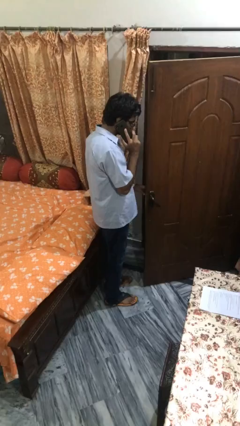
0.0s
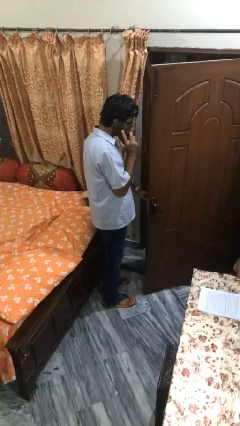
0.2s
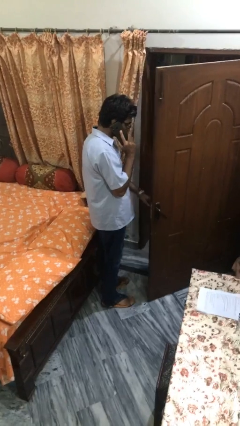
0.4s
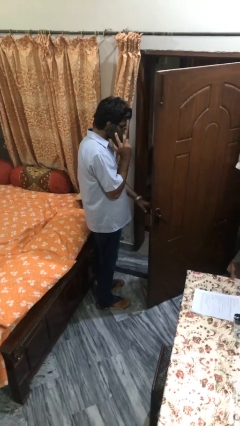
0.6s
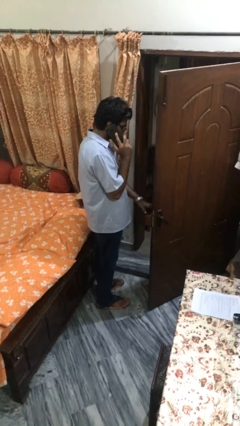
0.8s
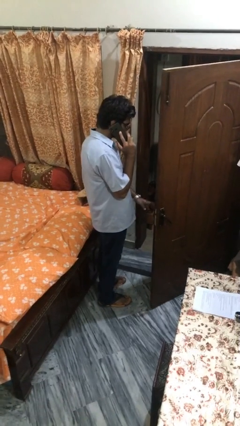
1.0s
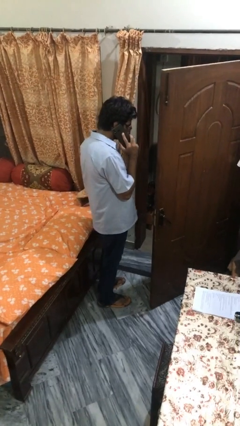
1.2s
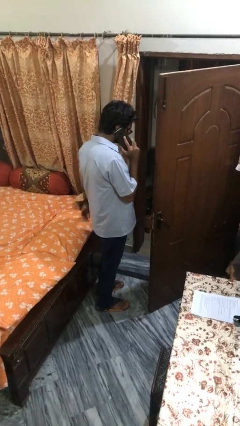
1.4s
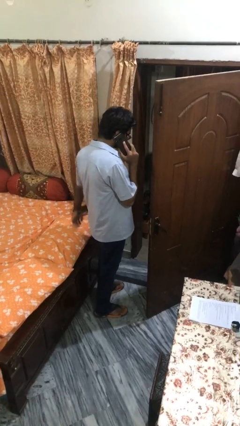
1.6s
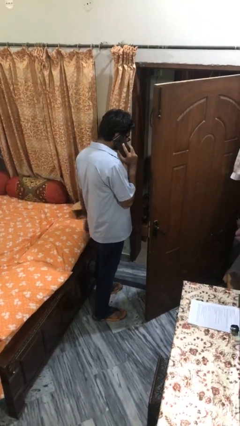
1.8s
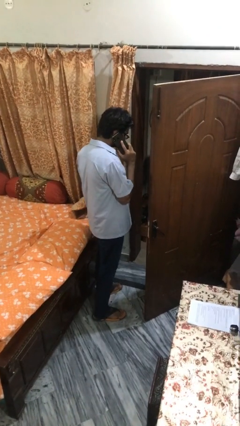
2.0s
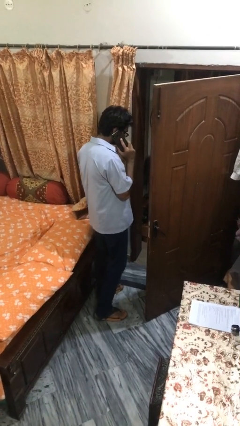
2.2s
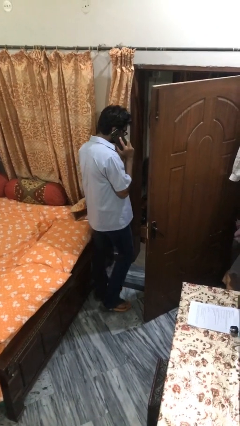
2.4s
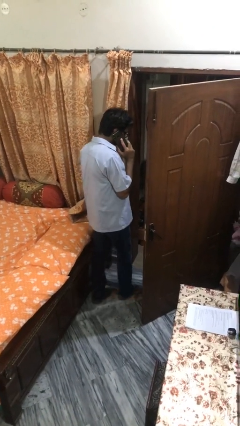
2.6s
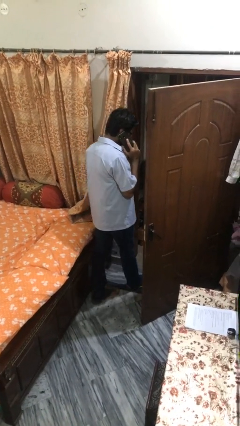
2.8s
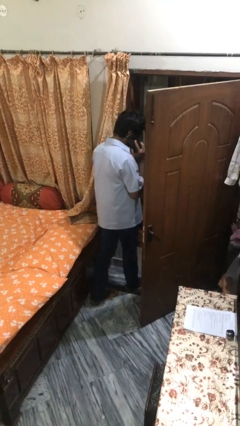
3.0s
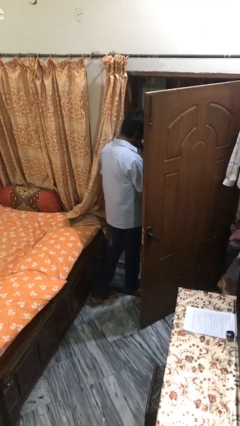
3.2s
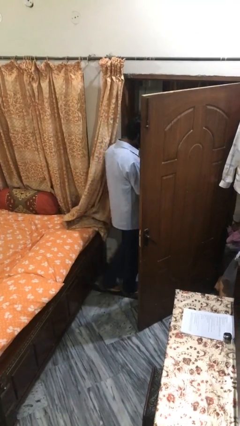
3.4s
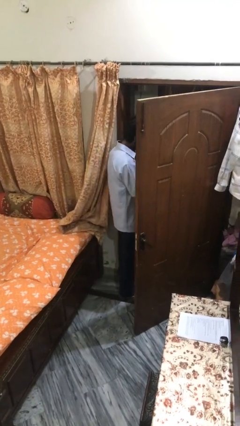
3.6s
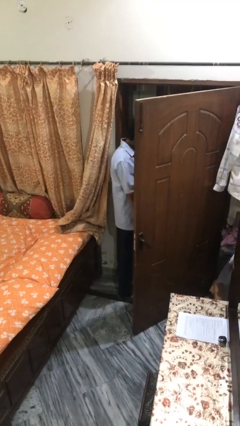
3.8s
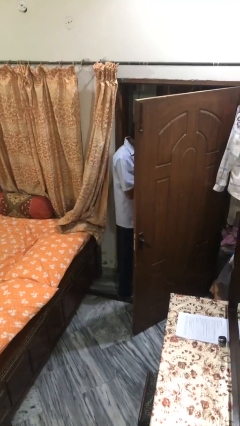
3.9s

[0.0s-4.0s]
person exits scene through structure

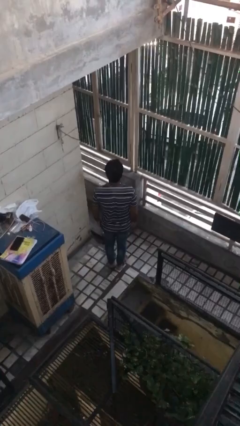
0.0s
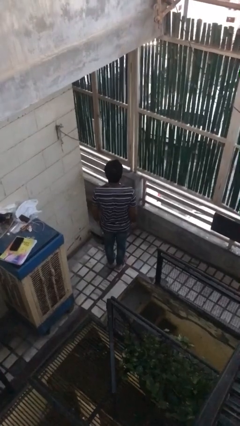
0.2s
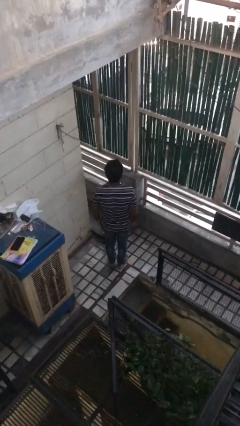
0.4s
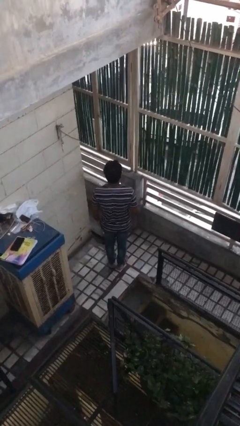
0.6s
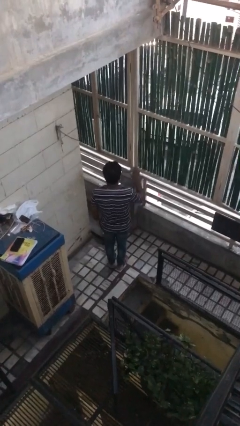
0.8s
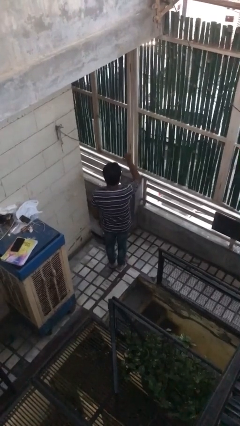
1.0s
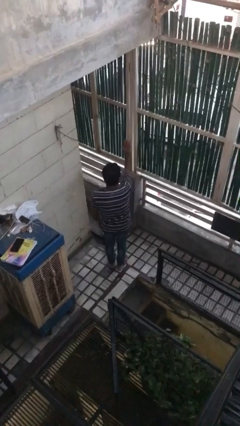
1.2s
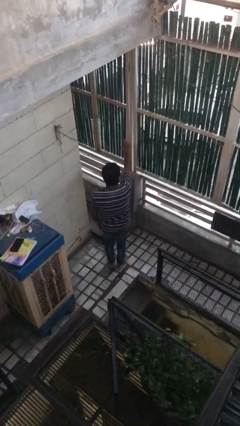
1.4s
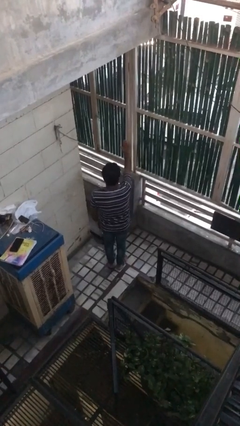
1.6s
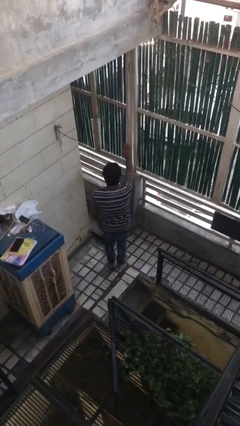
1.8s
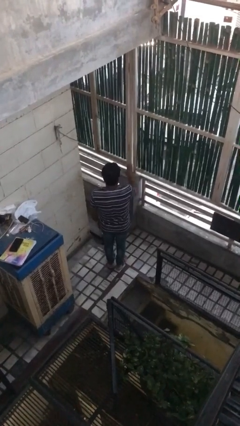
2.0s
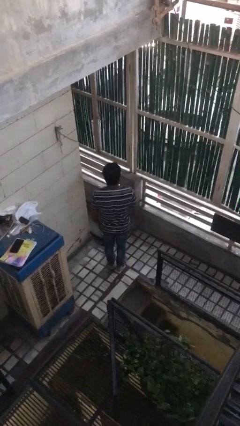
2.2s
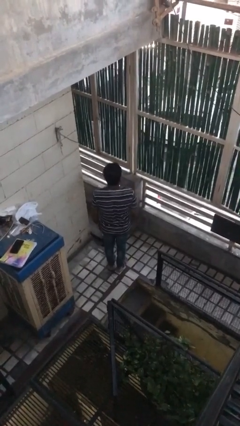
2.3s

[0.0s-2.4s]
person gestures stop

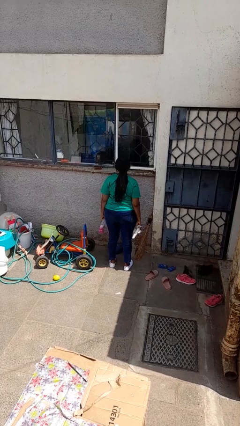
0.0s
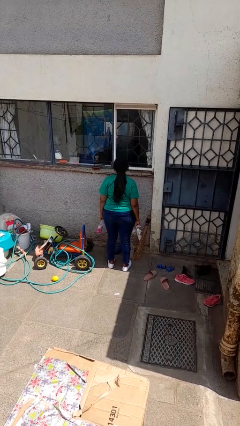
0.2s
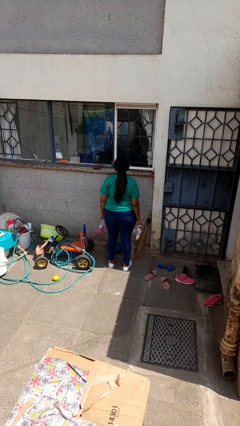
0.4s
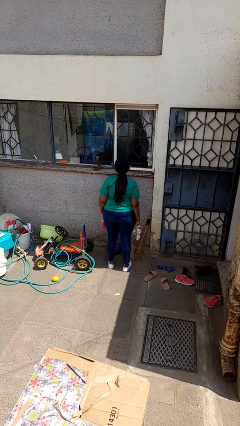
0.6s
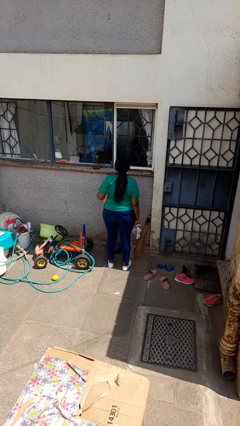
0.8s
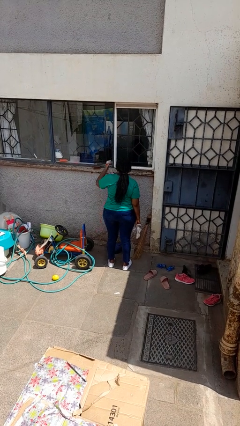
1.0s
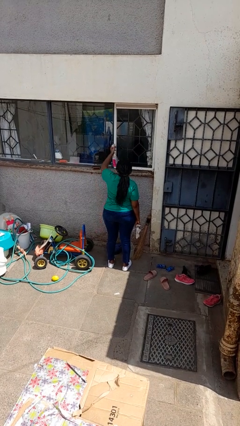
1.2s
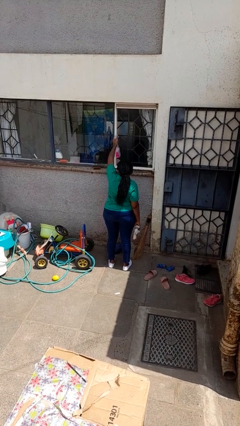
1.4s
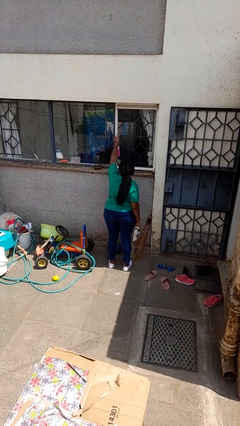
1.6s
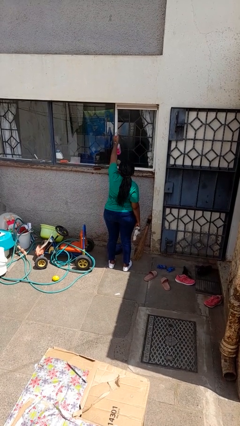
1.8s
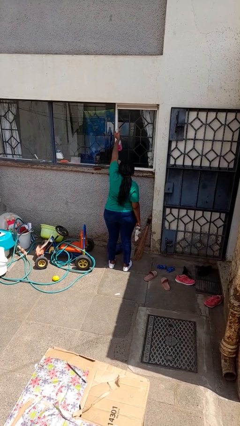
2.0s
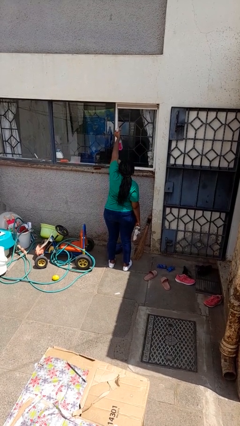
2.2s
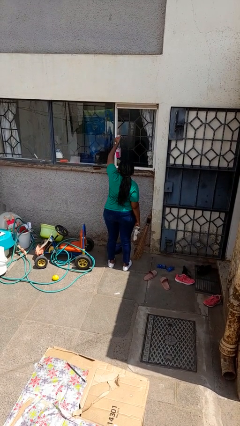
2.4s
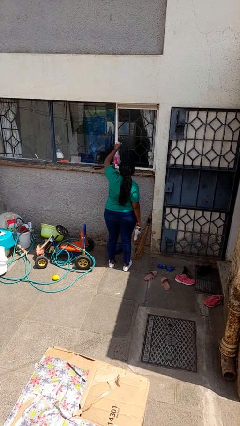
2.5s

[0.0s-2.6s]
person sprays from bottle

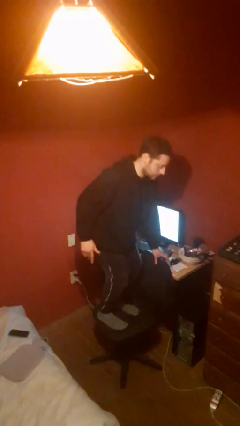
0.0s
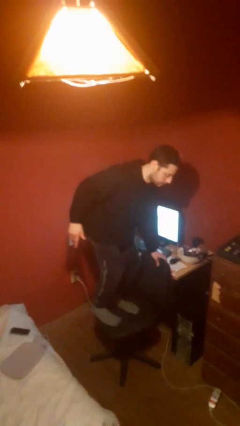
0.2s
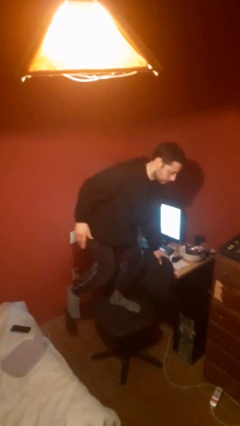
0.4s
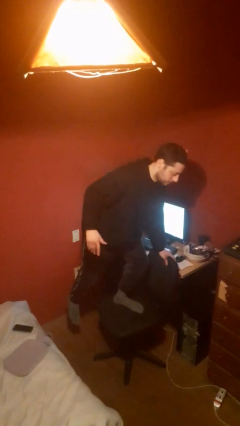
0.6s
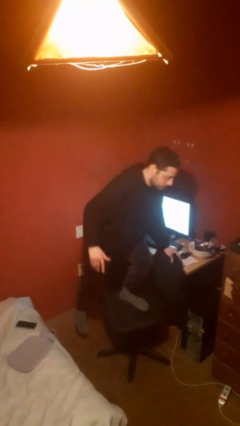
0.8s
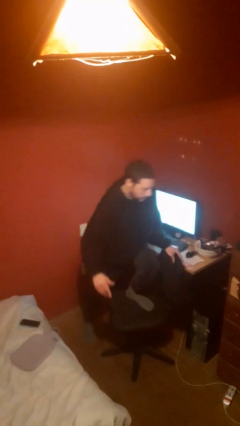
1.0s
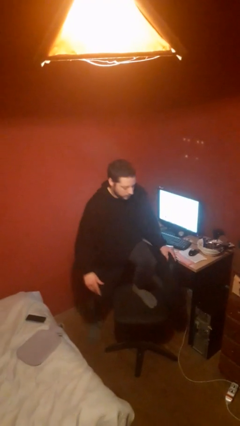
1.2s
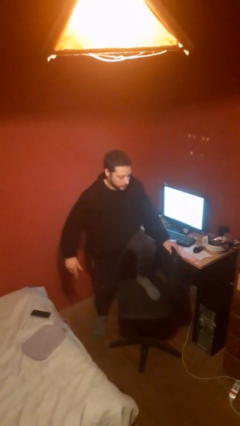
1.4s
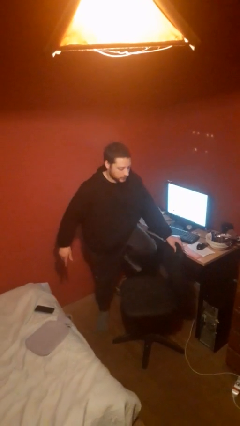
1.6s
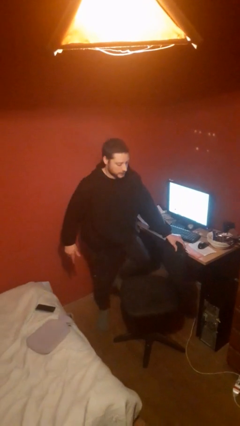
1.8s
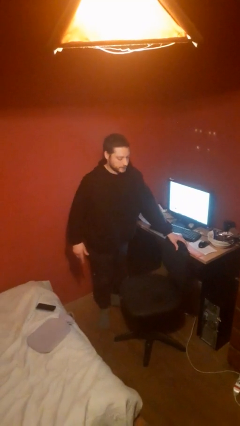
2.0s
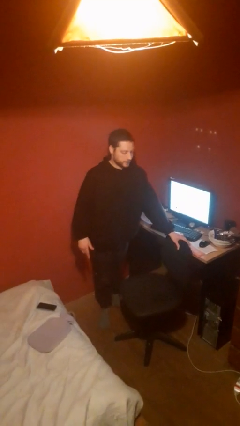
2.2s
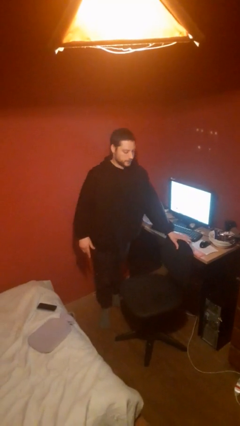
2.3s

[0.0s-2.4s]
person climbs off chair

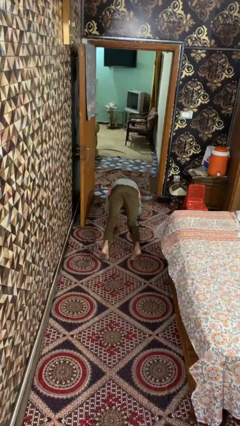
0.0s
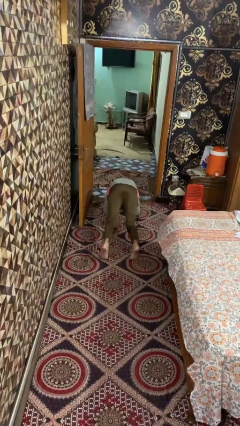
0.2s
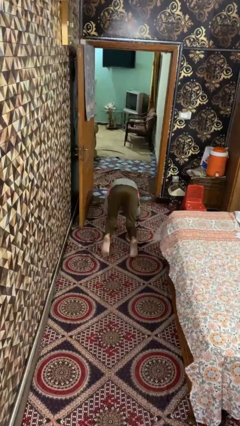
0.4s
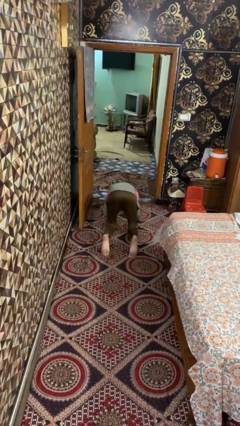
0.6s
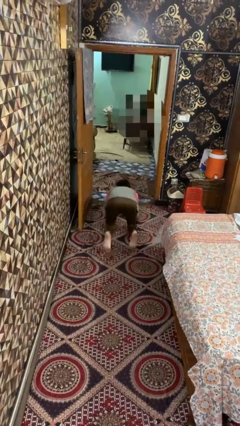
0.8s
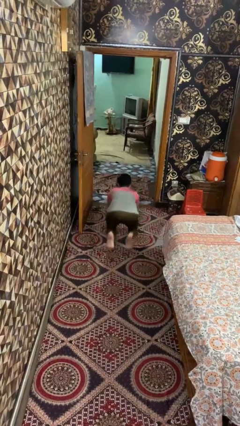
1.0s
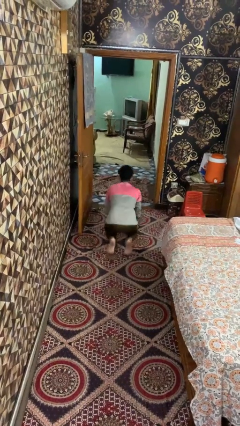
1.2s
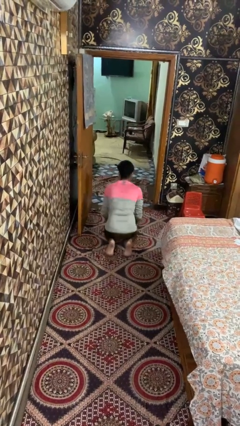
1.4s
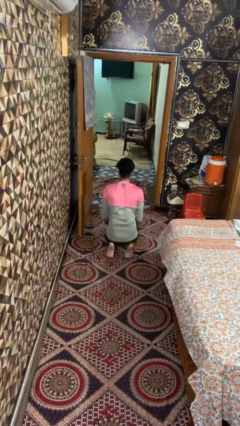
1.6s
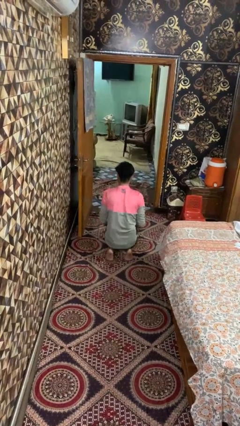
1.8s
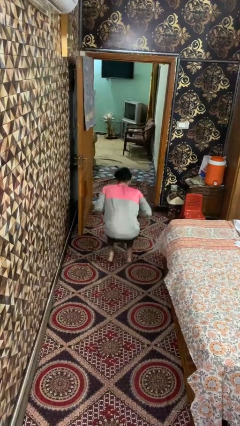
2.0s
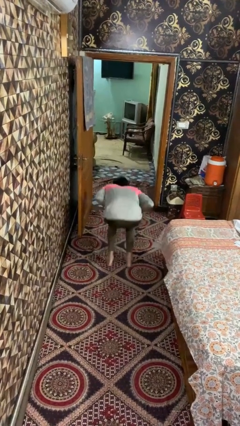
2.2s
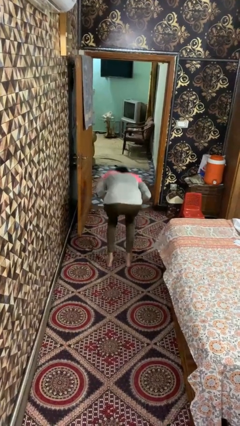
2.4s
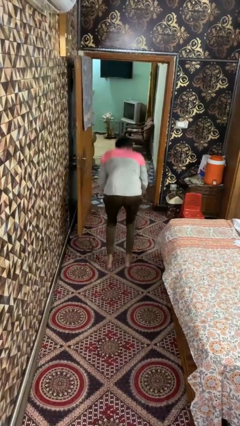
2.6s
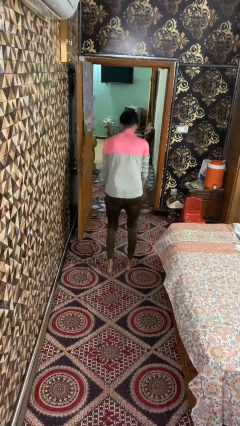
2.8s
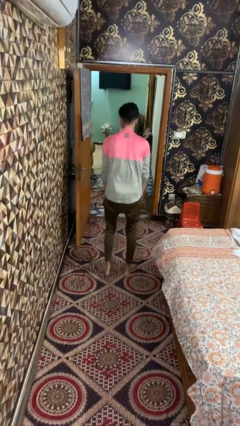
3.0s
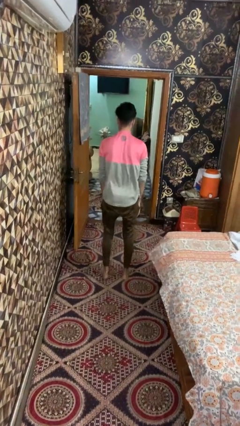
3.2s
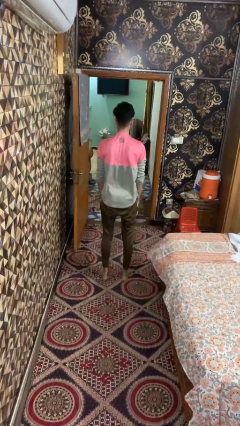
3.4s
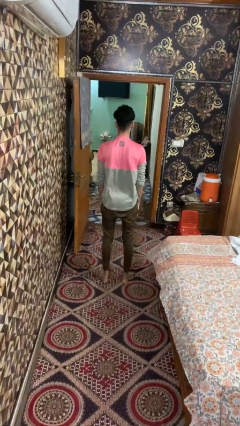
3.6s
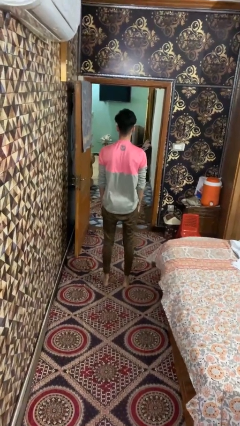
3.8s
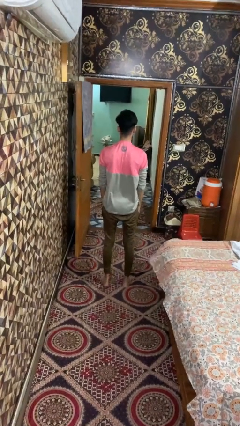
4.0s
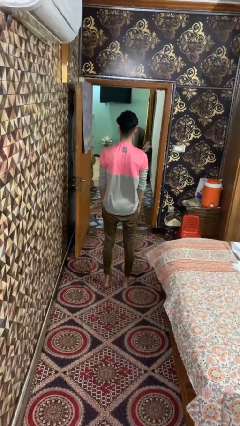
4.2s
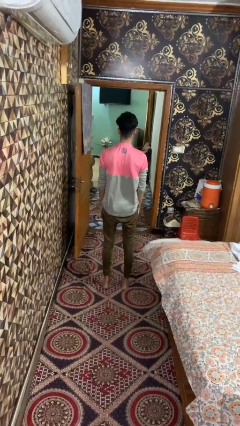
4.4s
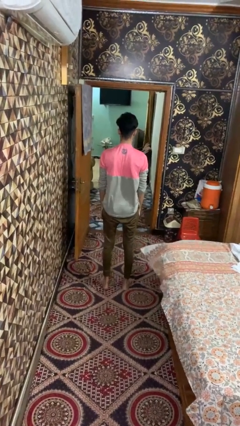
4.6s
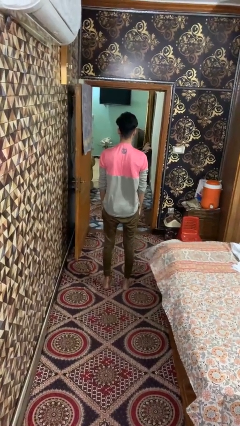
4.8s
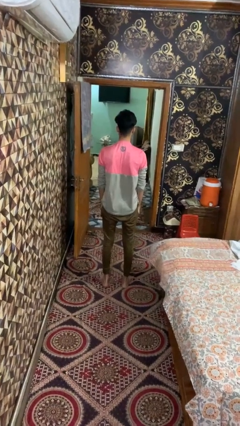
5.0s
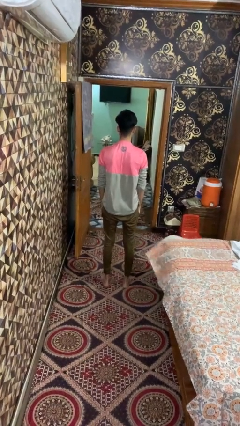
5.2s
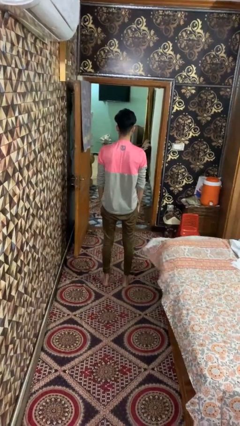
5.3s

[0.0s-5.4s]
person stands up from floor

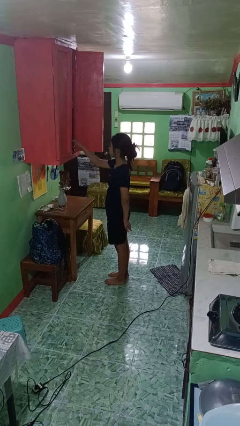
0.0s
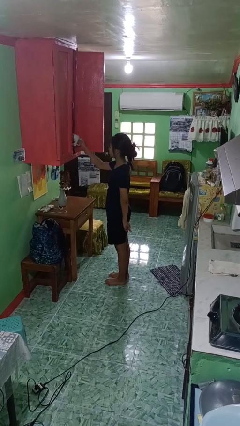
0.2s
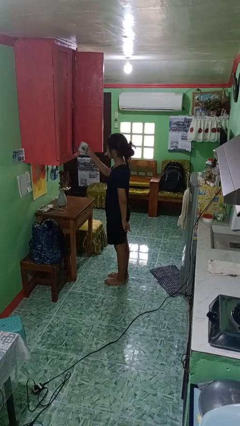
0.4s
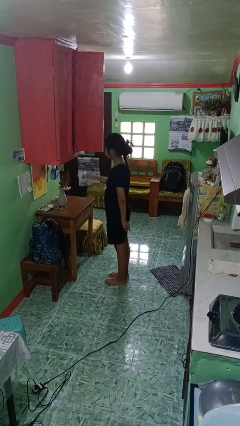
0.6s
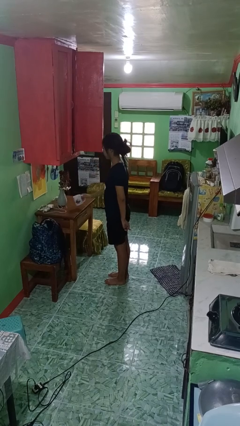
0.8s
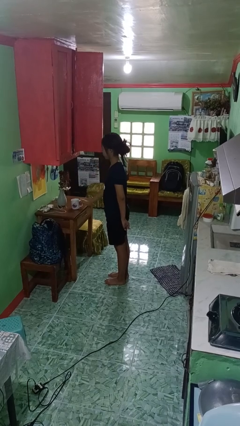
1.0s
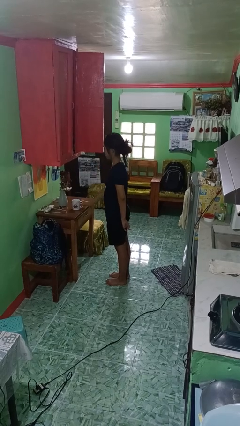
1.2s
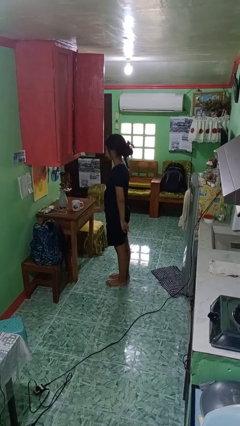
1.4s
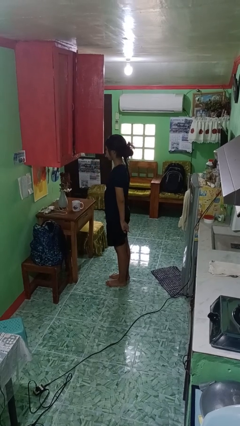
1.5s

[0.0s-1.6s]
person takes object from cabinet
